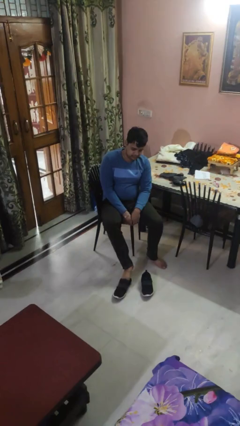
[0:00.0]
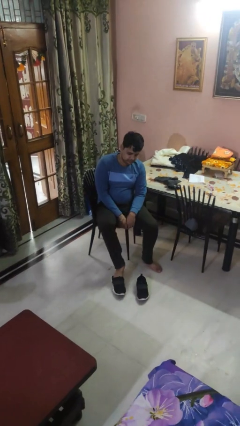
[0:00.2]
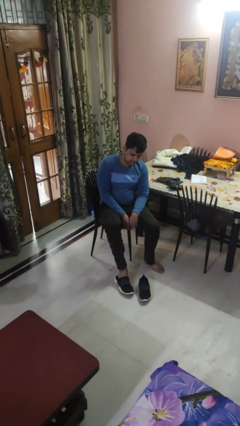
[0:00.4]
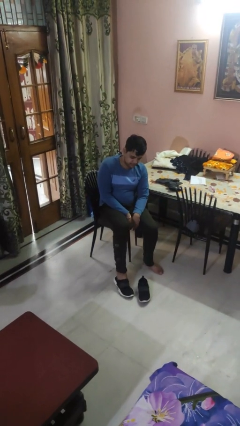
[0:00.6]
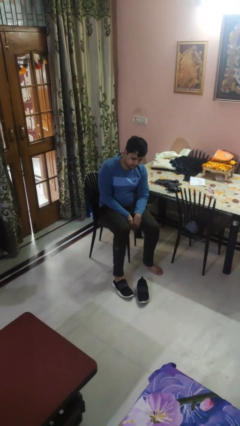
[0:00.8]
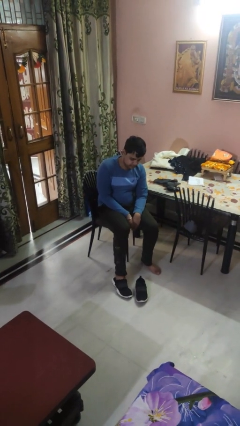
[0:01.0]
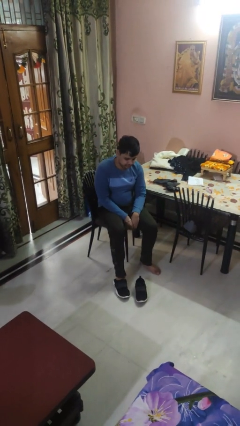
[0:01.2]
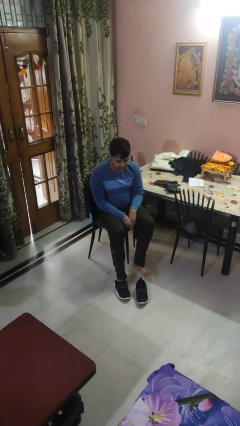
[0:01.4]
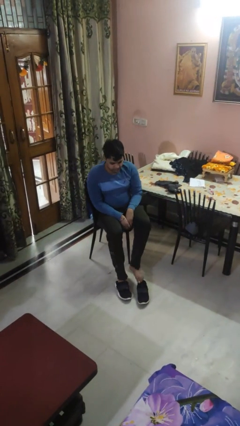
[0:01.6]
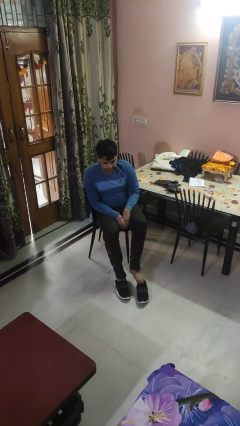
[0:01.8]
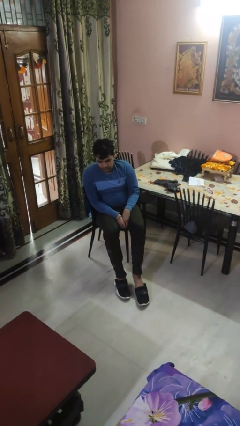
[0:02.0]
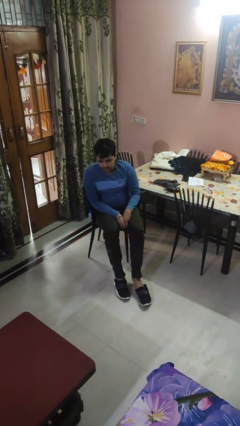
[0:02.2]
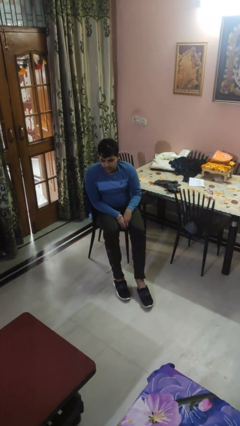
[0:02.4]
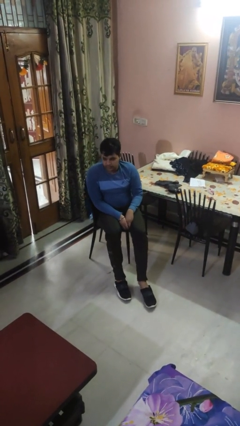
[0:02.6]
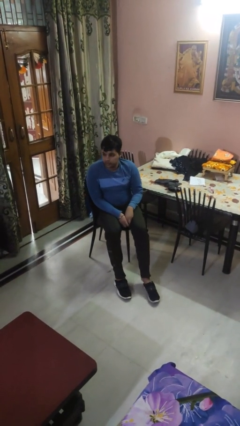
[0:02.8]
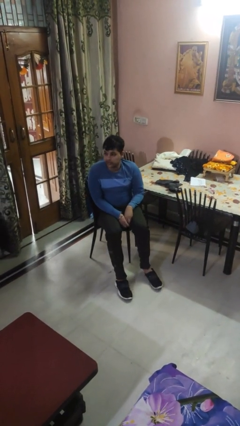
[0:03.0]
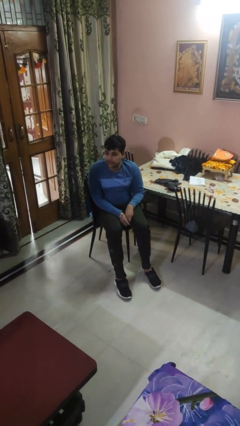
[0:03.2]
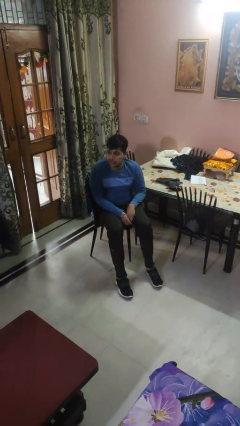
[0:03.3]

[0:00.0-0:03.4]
person puts on shoes

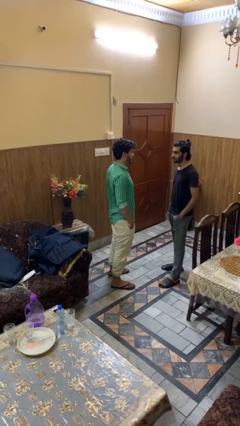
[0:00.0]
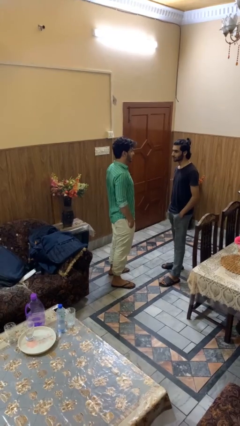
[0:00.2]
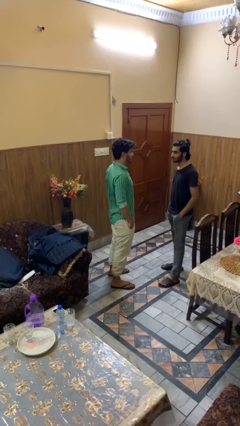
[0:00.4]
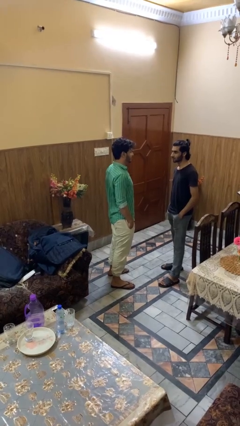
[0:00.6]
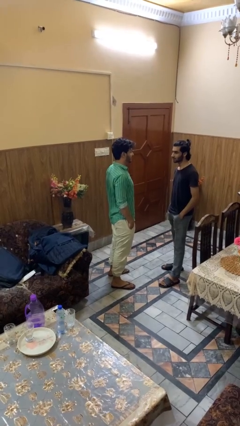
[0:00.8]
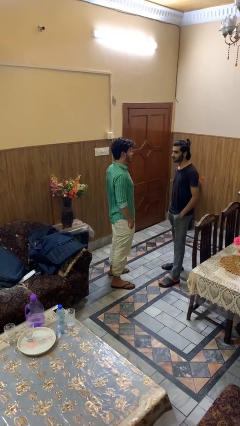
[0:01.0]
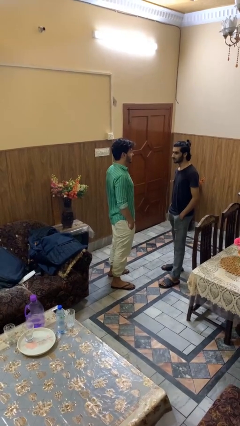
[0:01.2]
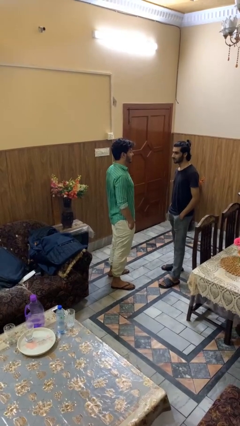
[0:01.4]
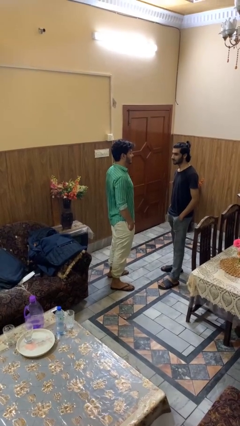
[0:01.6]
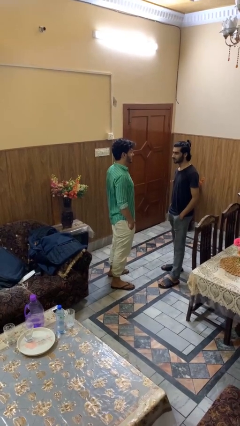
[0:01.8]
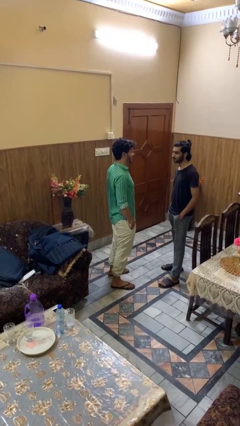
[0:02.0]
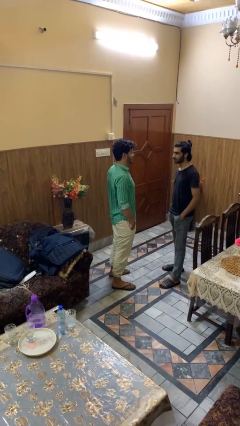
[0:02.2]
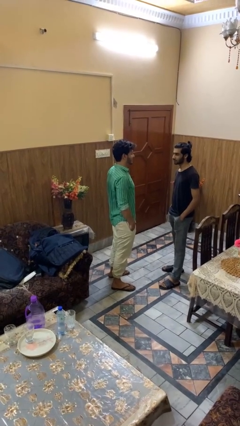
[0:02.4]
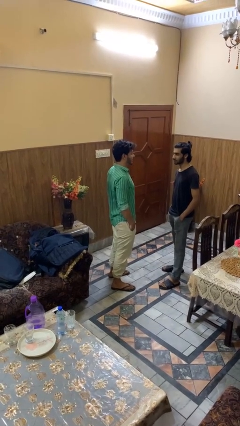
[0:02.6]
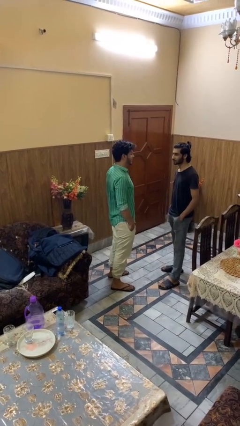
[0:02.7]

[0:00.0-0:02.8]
person laughs with person

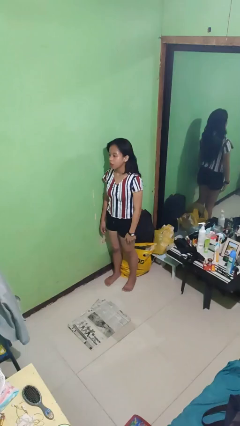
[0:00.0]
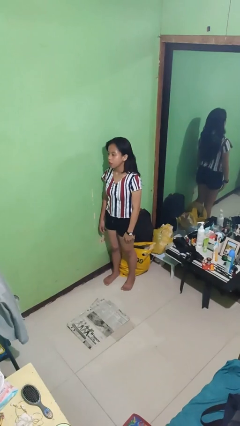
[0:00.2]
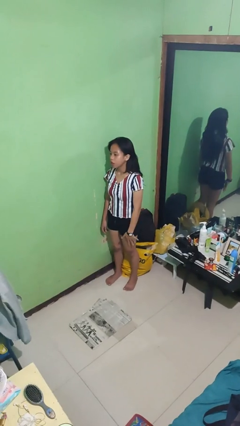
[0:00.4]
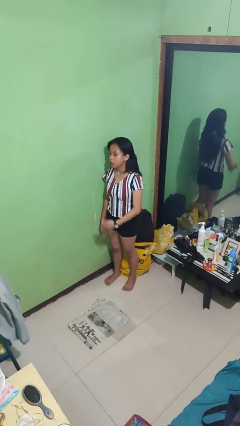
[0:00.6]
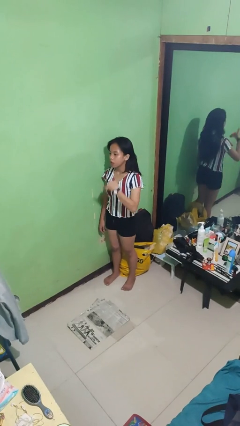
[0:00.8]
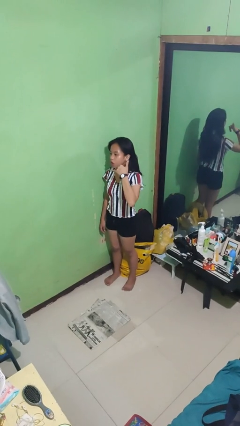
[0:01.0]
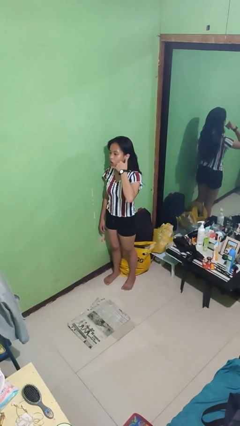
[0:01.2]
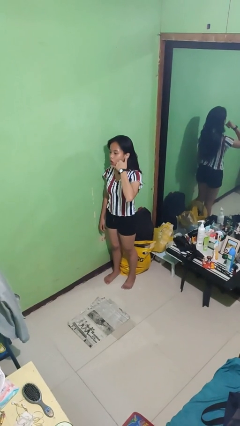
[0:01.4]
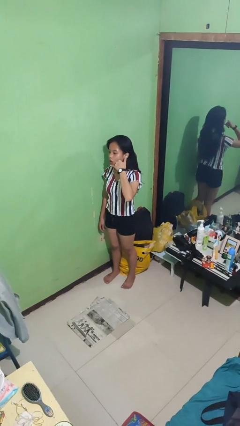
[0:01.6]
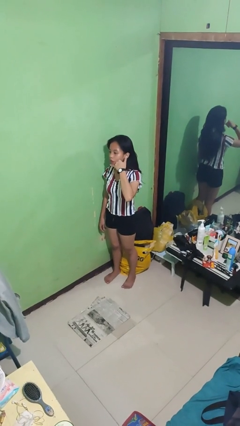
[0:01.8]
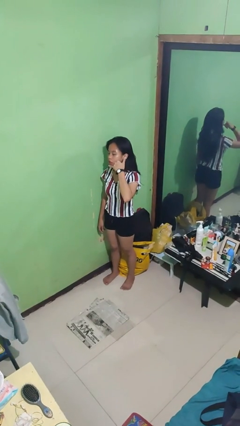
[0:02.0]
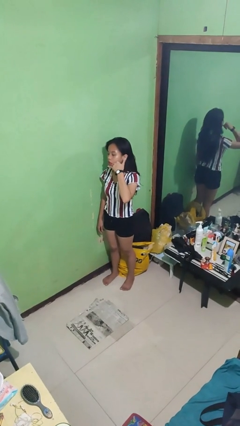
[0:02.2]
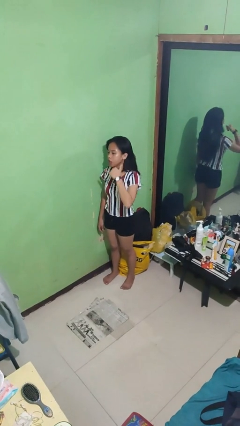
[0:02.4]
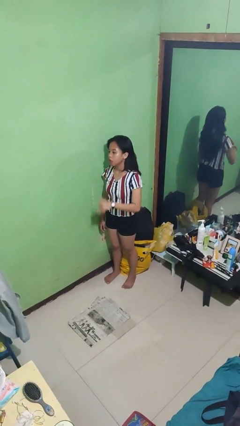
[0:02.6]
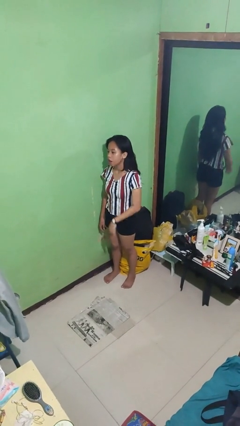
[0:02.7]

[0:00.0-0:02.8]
person gestures call me

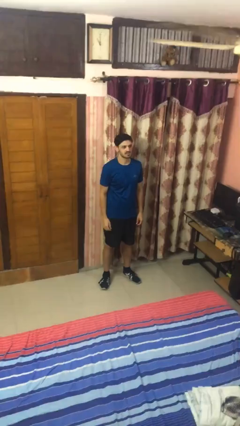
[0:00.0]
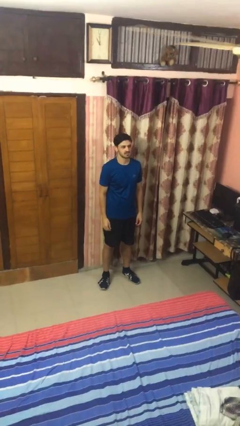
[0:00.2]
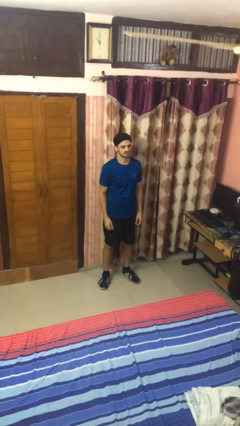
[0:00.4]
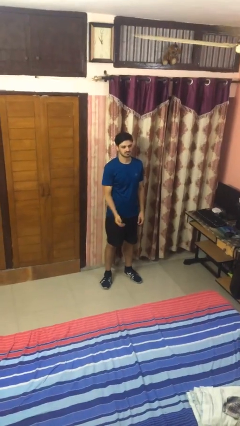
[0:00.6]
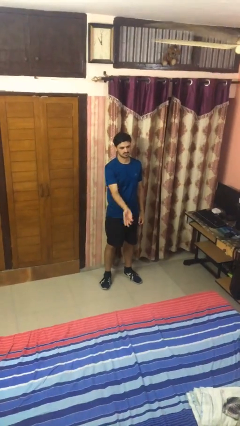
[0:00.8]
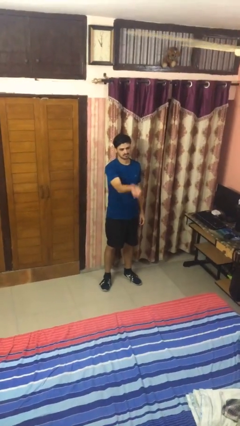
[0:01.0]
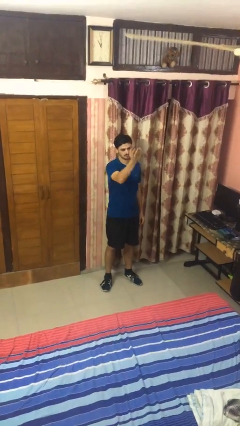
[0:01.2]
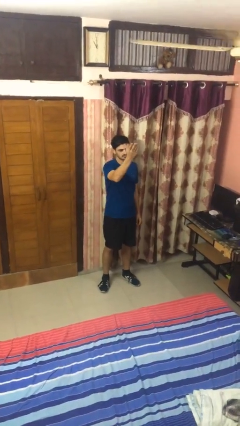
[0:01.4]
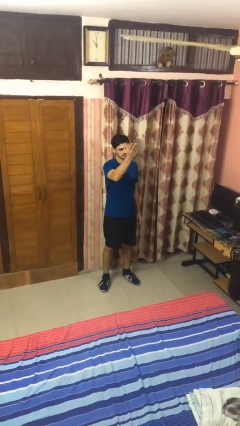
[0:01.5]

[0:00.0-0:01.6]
person gestures swipe up

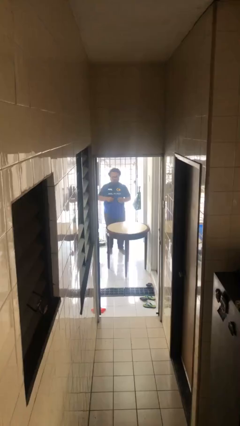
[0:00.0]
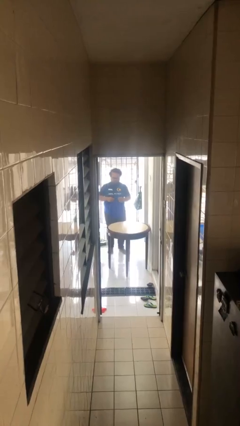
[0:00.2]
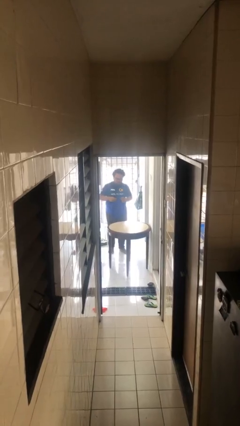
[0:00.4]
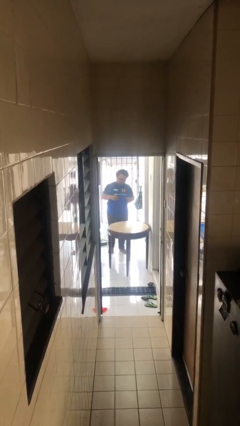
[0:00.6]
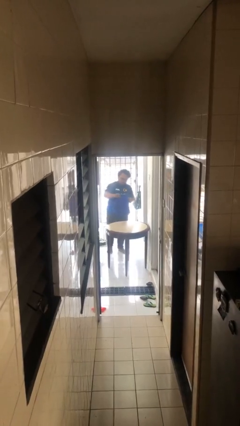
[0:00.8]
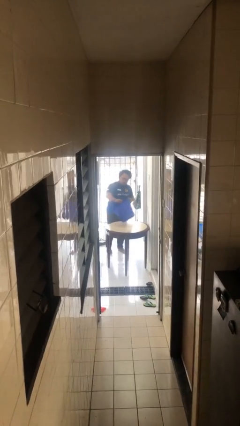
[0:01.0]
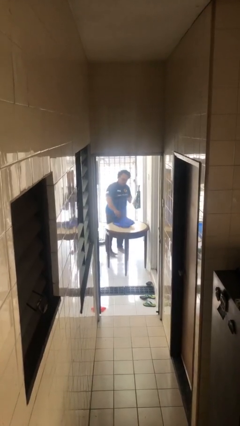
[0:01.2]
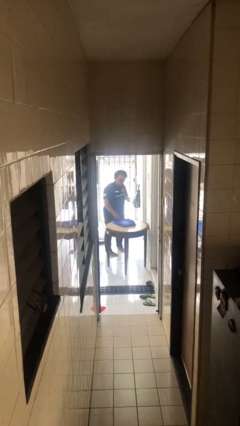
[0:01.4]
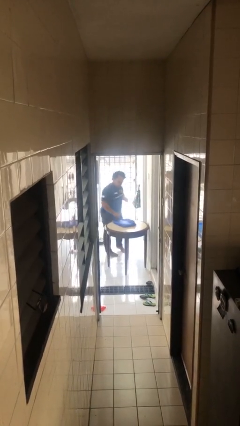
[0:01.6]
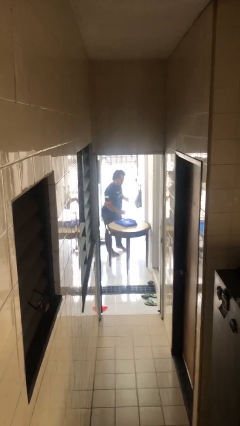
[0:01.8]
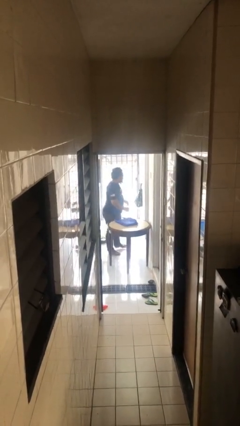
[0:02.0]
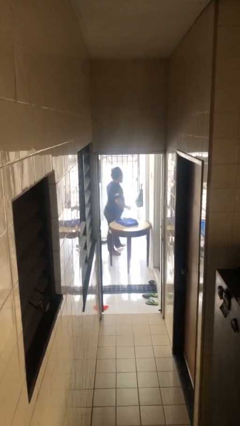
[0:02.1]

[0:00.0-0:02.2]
person puts down object on table

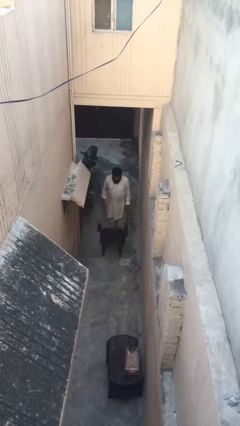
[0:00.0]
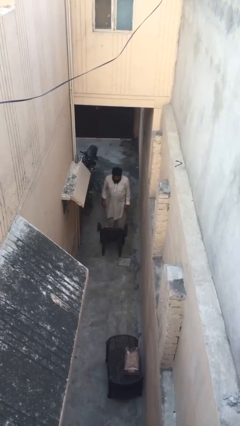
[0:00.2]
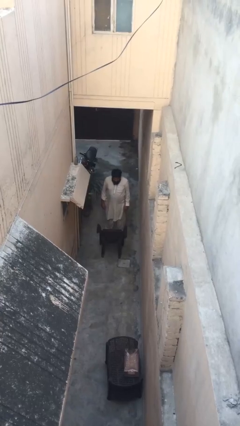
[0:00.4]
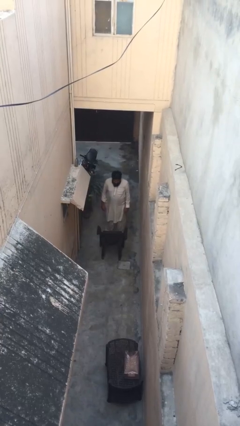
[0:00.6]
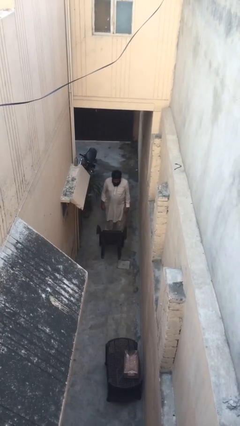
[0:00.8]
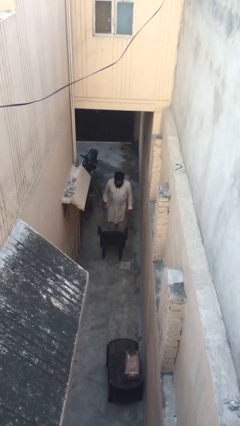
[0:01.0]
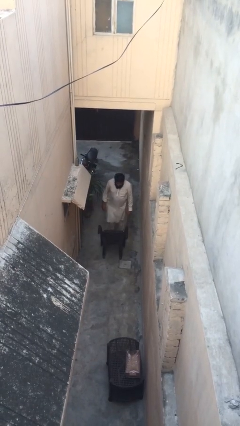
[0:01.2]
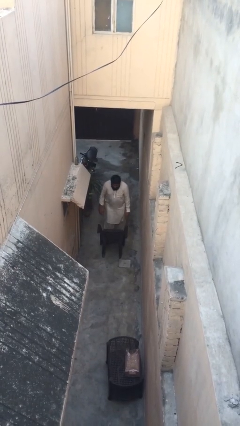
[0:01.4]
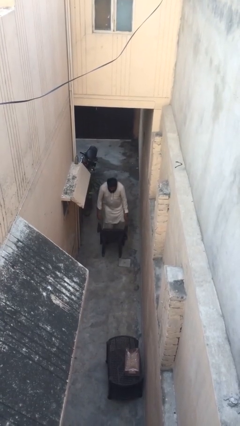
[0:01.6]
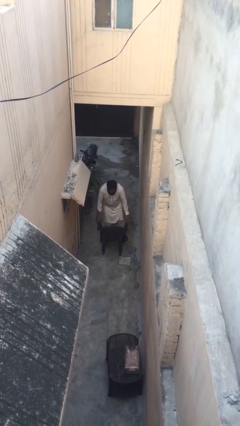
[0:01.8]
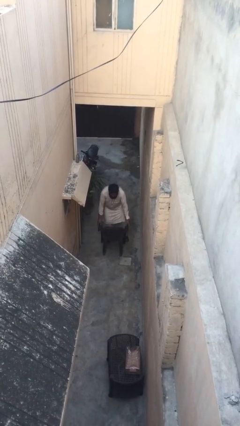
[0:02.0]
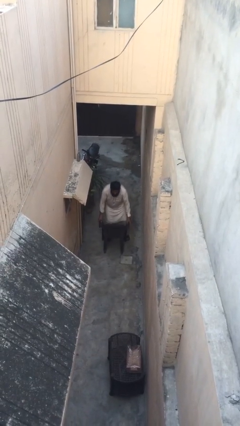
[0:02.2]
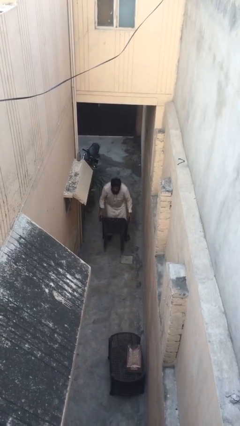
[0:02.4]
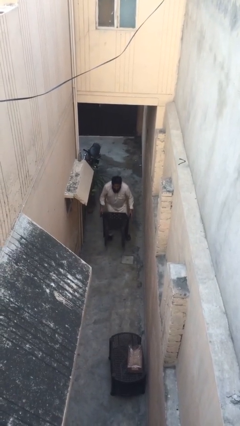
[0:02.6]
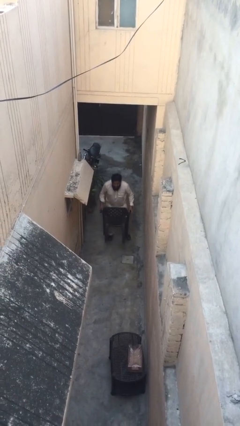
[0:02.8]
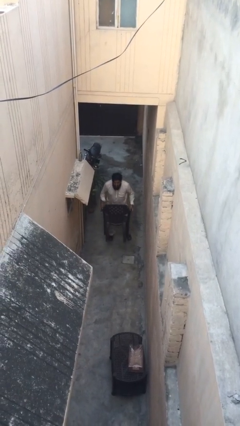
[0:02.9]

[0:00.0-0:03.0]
person picks up object from floor

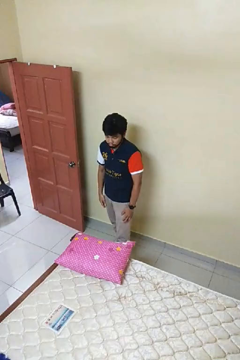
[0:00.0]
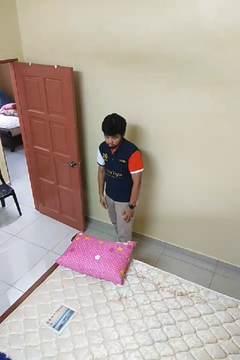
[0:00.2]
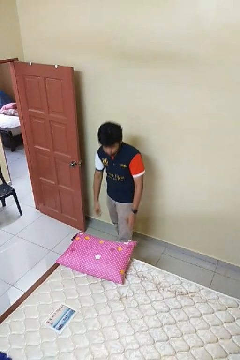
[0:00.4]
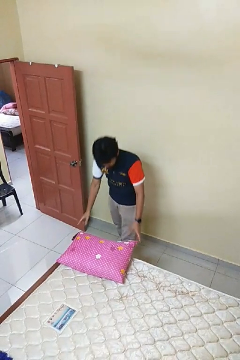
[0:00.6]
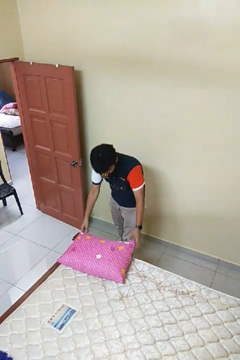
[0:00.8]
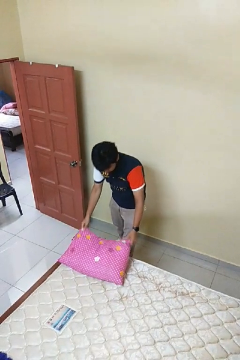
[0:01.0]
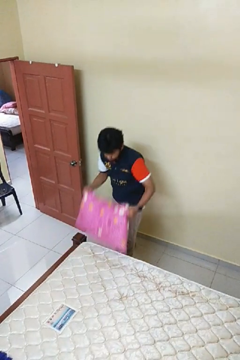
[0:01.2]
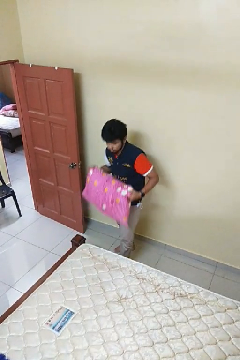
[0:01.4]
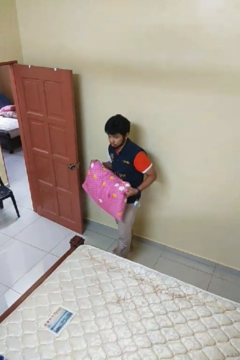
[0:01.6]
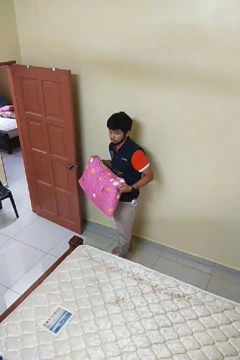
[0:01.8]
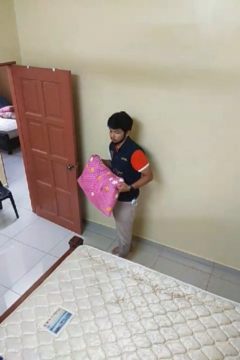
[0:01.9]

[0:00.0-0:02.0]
person picks up object from bed
